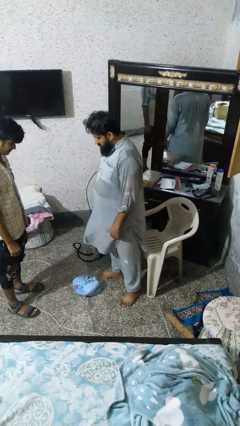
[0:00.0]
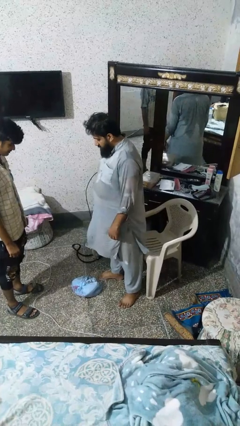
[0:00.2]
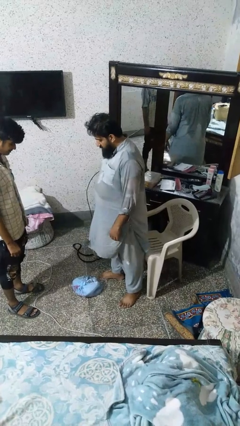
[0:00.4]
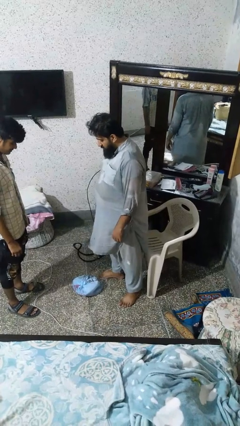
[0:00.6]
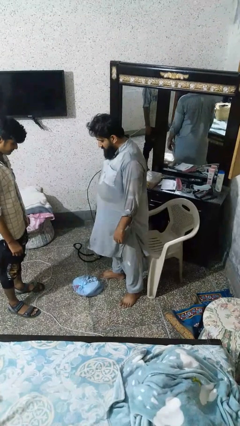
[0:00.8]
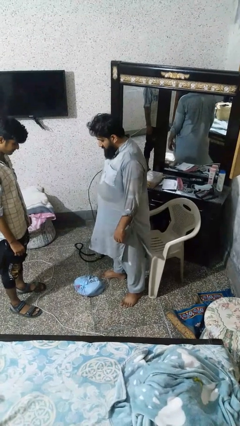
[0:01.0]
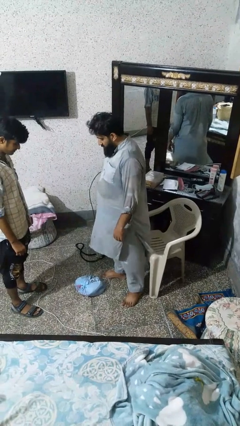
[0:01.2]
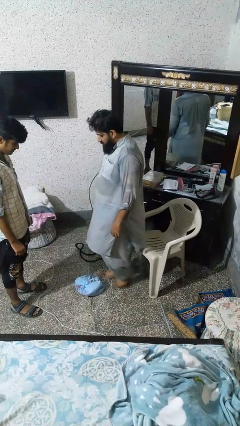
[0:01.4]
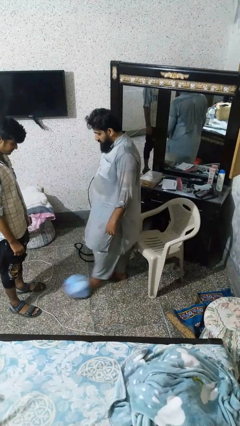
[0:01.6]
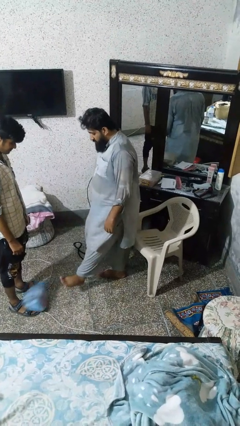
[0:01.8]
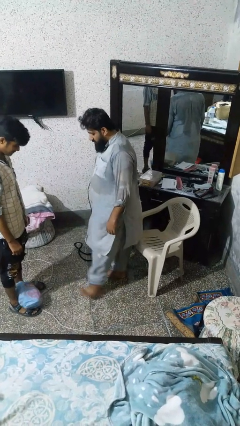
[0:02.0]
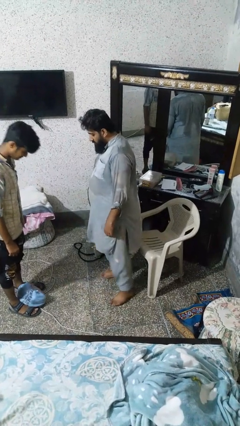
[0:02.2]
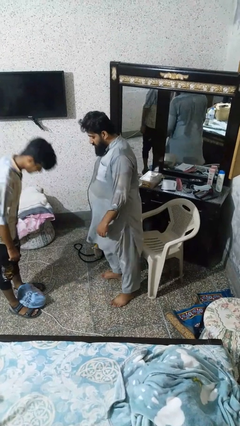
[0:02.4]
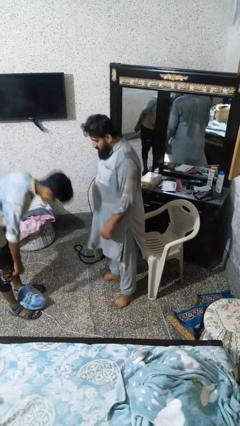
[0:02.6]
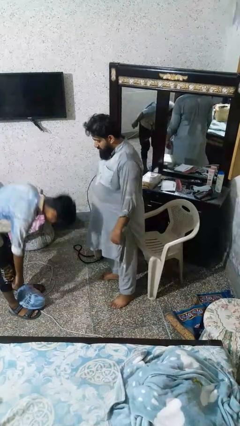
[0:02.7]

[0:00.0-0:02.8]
person kicks object to person

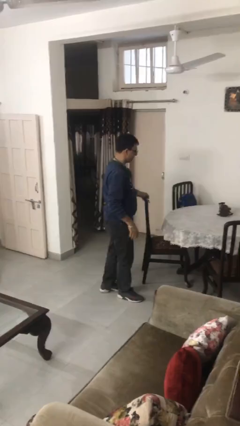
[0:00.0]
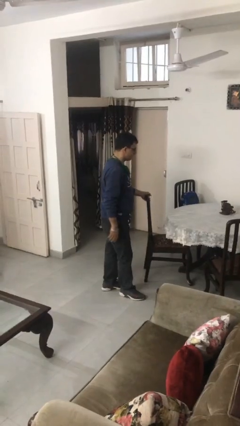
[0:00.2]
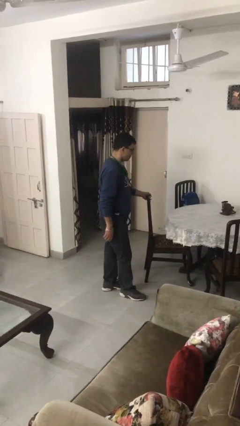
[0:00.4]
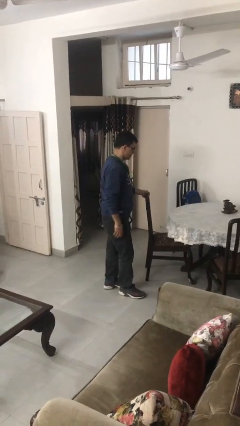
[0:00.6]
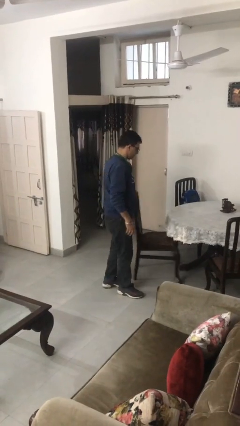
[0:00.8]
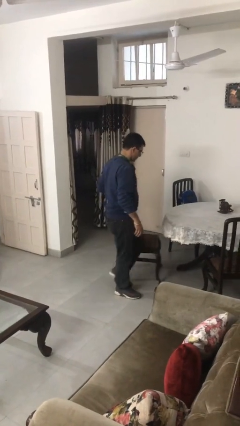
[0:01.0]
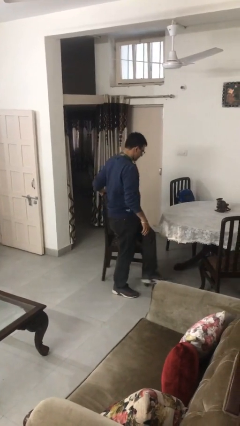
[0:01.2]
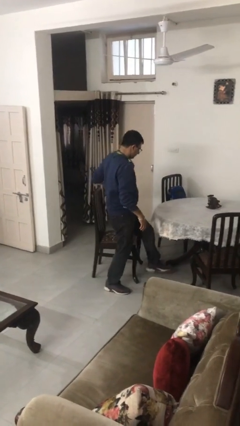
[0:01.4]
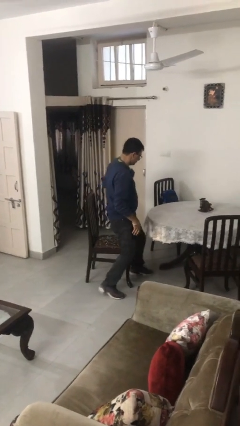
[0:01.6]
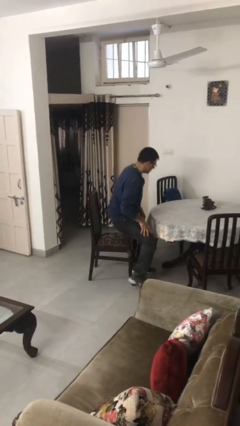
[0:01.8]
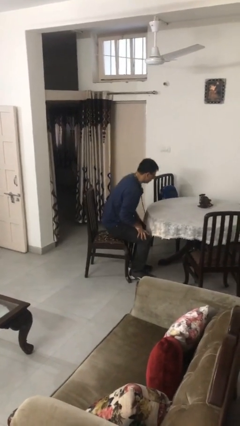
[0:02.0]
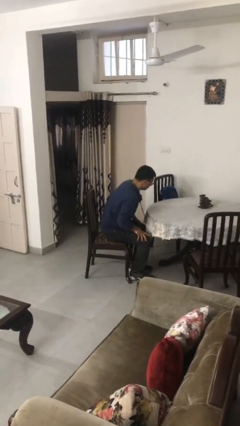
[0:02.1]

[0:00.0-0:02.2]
person sits down

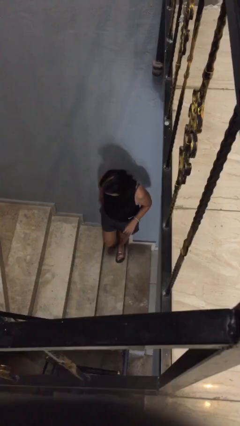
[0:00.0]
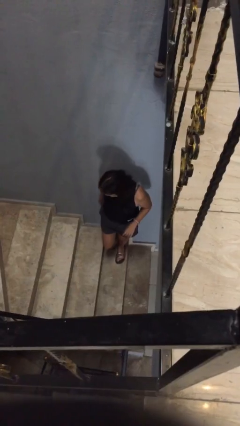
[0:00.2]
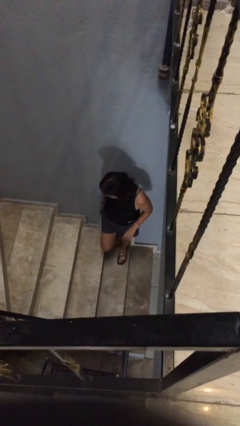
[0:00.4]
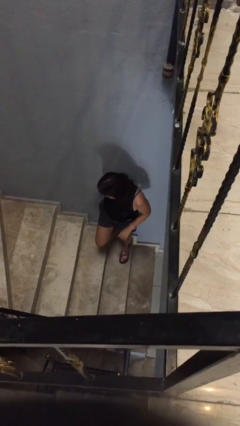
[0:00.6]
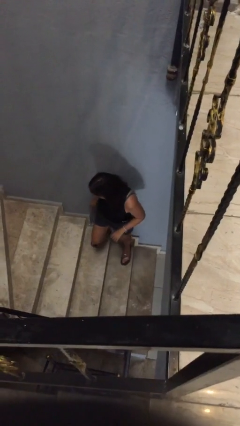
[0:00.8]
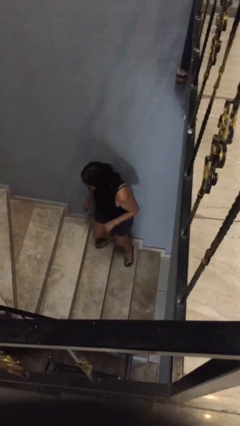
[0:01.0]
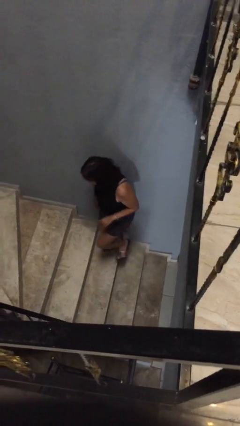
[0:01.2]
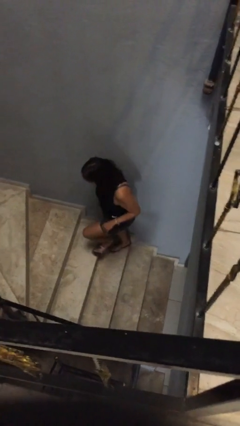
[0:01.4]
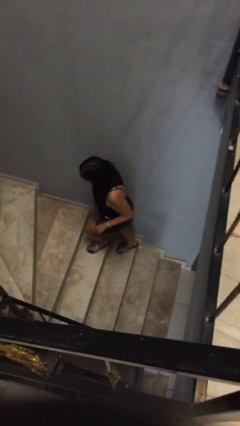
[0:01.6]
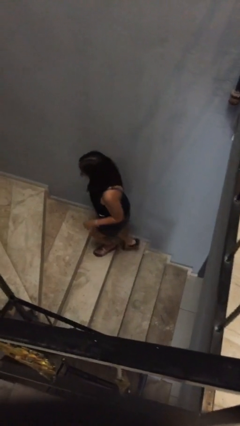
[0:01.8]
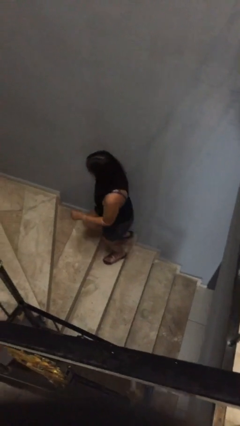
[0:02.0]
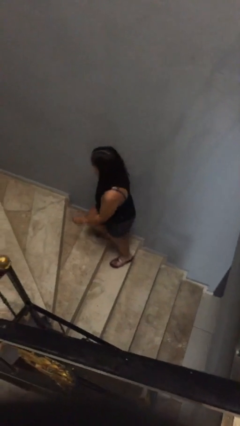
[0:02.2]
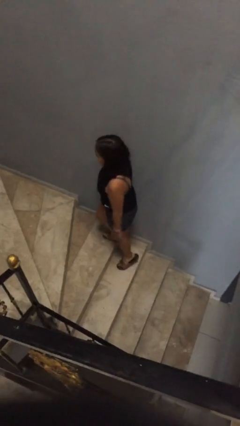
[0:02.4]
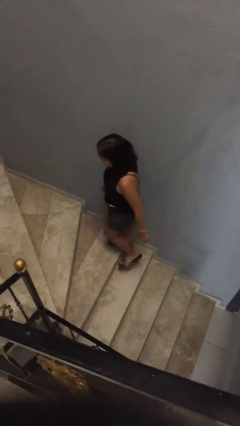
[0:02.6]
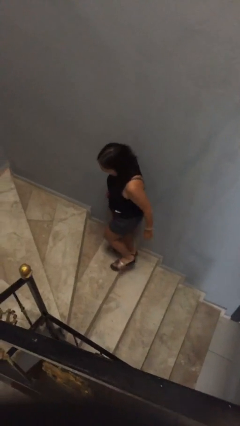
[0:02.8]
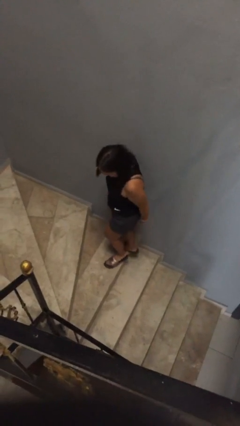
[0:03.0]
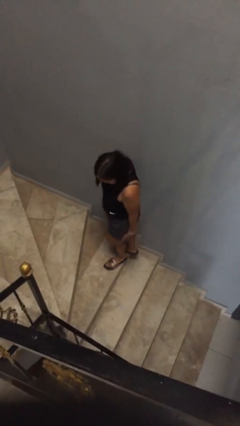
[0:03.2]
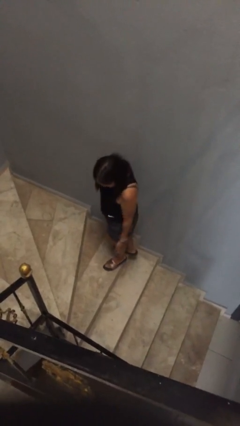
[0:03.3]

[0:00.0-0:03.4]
person climbs up stairs

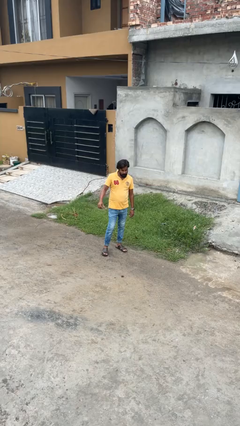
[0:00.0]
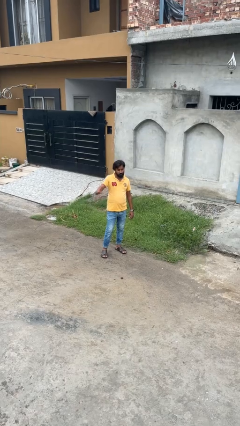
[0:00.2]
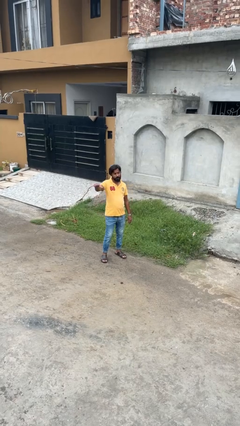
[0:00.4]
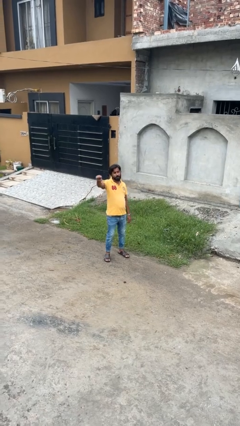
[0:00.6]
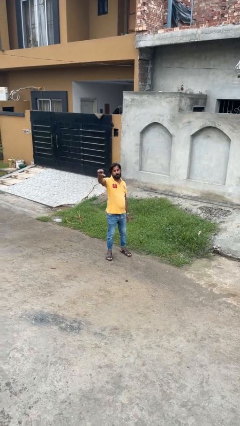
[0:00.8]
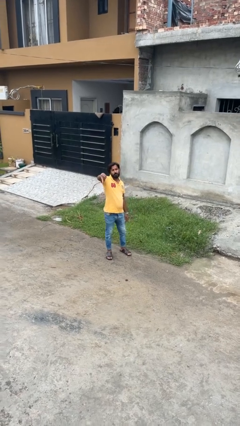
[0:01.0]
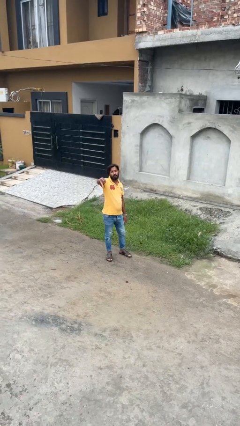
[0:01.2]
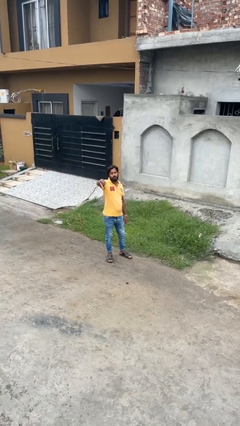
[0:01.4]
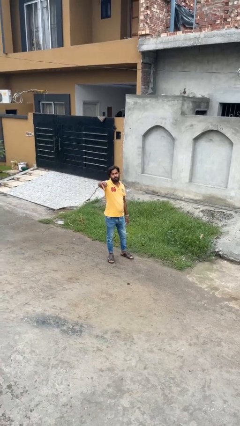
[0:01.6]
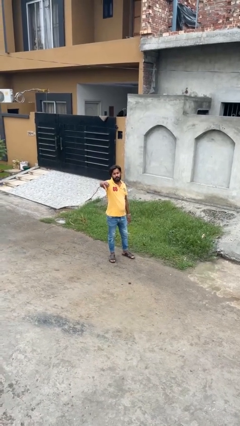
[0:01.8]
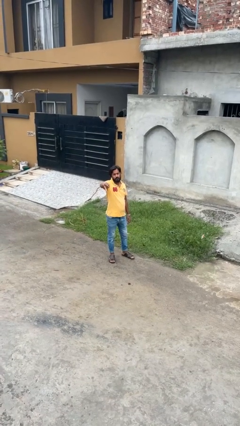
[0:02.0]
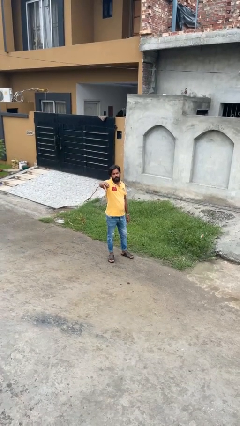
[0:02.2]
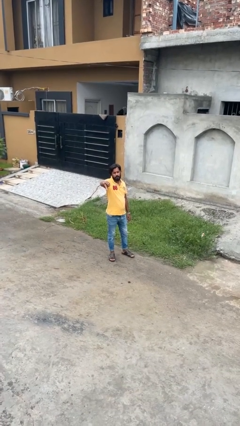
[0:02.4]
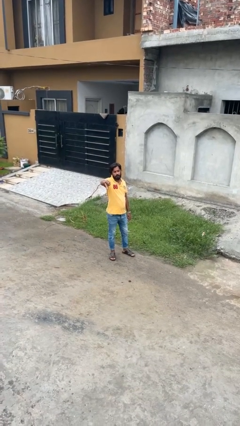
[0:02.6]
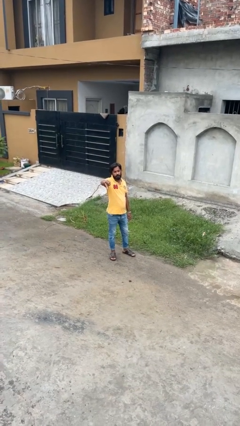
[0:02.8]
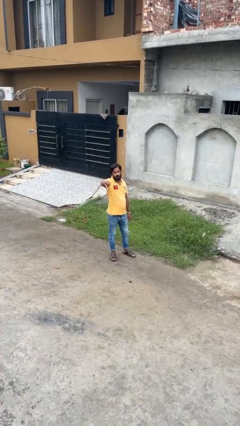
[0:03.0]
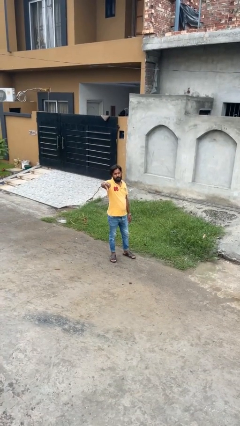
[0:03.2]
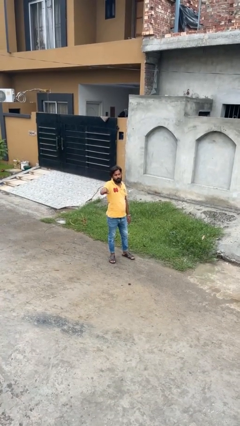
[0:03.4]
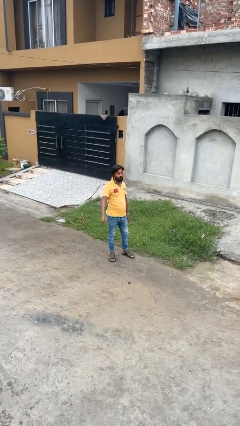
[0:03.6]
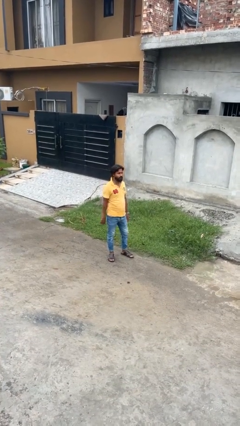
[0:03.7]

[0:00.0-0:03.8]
person gestures thumbs down

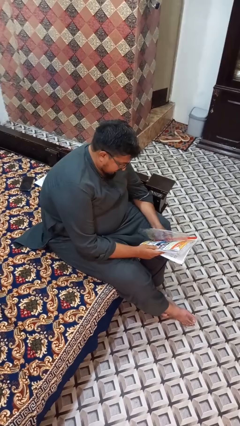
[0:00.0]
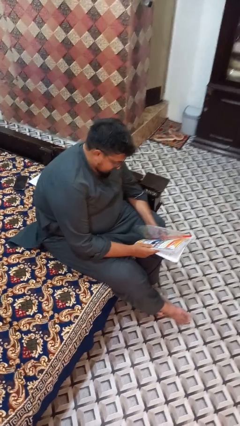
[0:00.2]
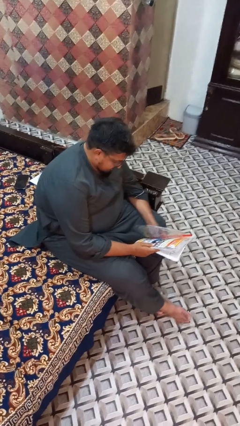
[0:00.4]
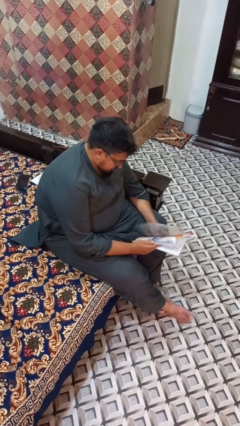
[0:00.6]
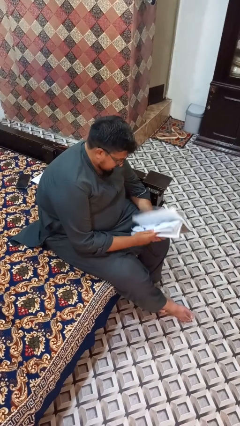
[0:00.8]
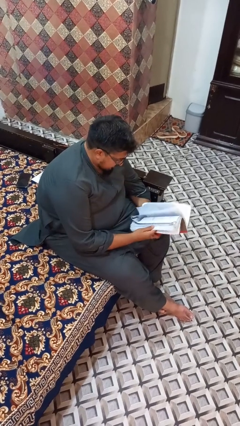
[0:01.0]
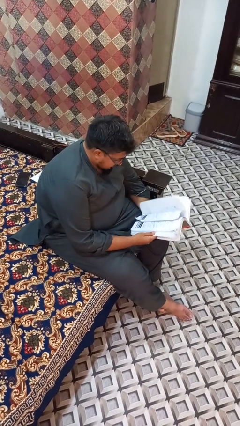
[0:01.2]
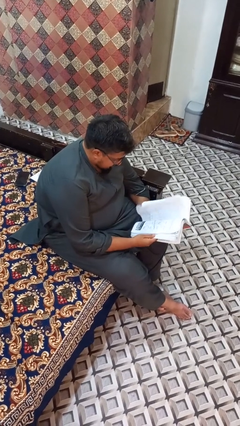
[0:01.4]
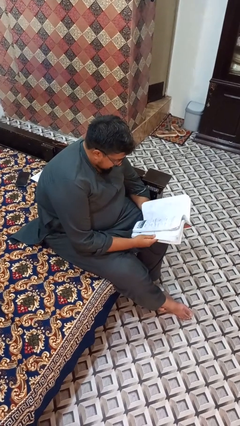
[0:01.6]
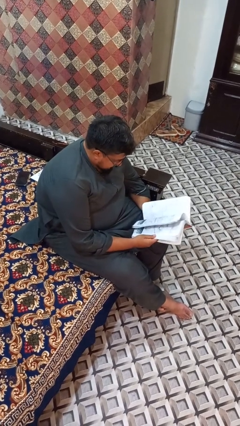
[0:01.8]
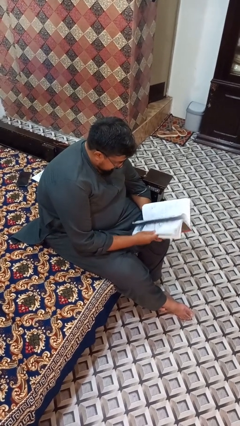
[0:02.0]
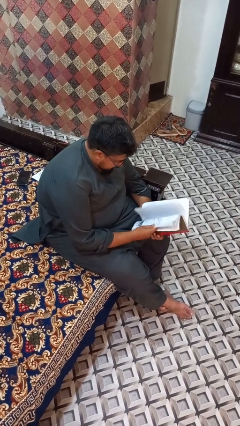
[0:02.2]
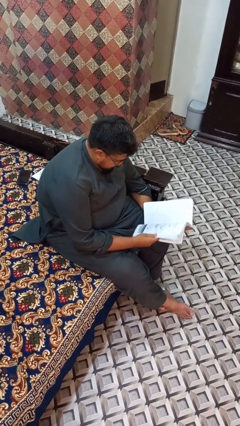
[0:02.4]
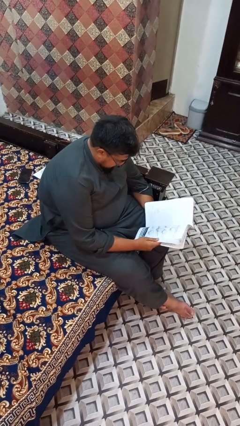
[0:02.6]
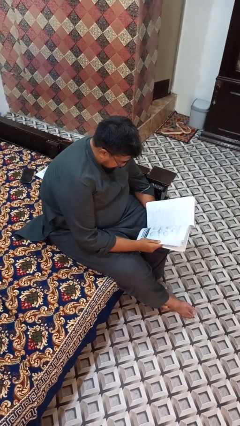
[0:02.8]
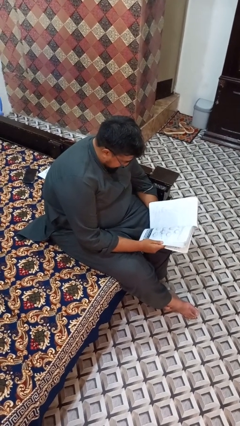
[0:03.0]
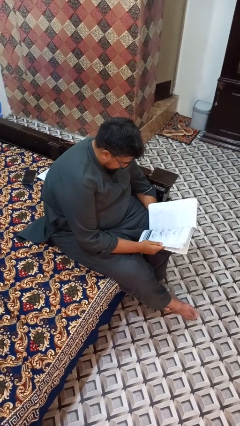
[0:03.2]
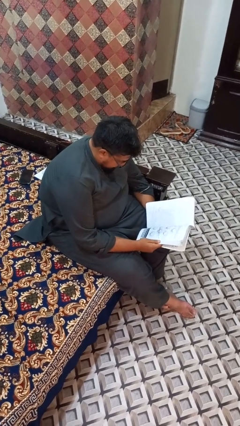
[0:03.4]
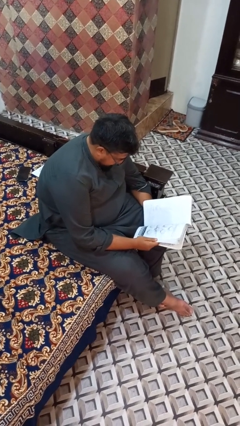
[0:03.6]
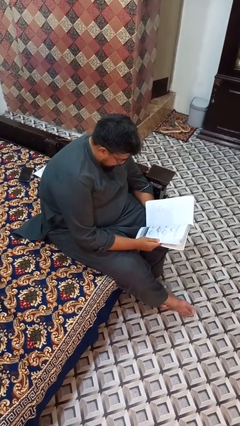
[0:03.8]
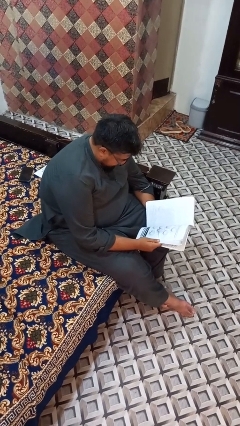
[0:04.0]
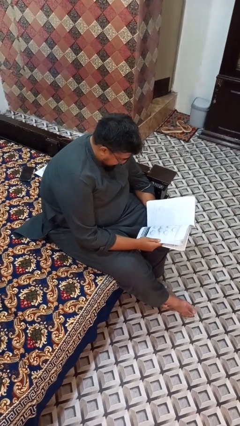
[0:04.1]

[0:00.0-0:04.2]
person reads book

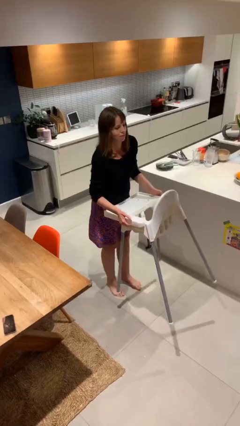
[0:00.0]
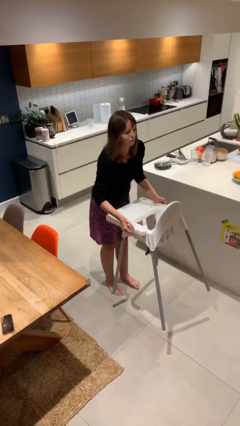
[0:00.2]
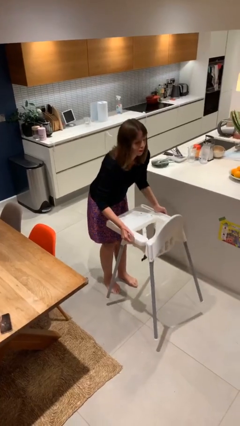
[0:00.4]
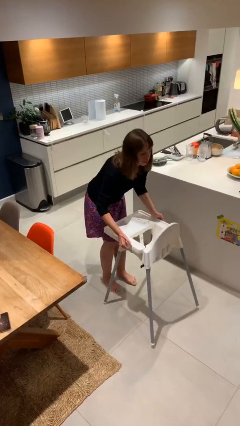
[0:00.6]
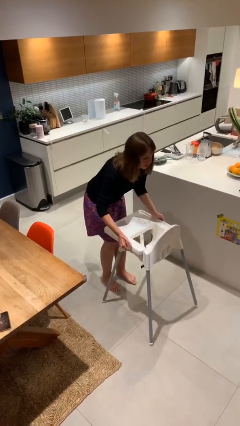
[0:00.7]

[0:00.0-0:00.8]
person puts down object on floor

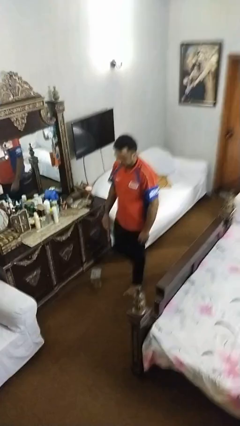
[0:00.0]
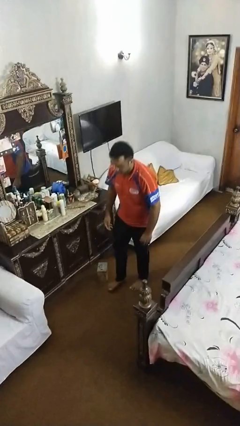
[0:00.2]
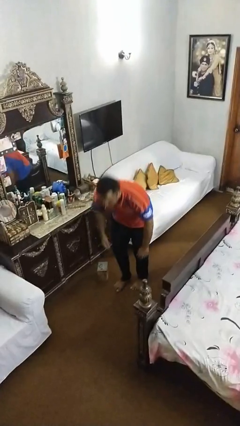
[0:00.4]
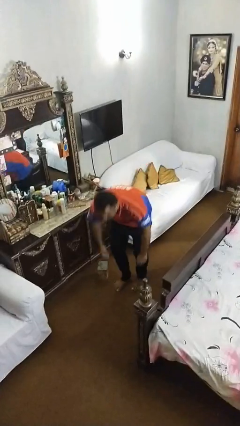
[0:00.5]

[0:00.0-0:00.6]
person trips on object on floor
